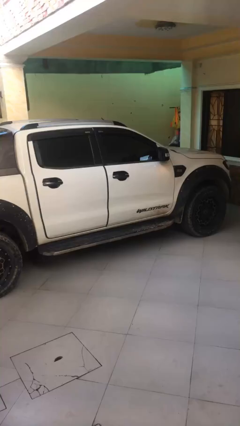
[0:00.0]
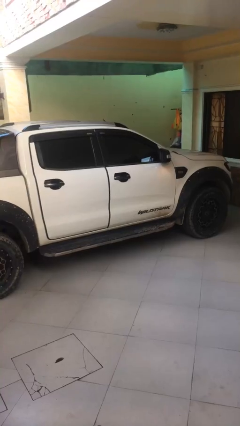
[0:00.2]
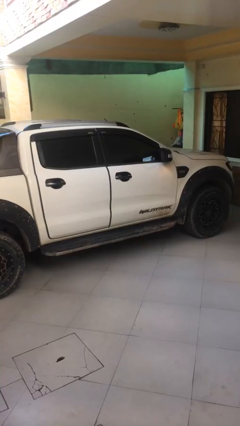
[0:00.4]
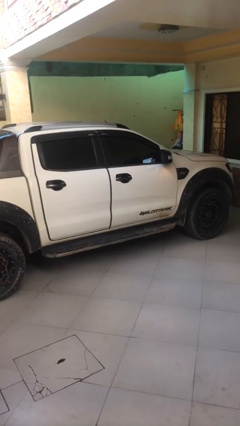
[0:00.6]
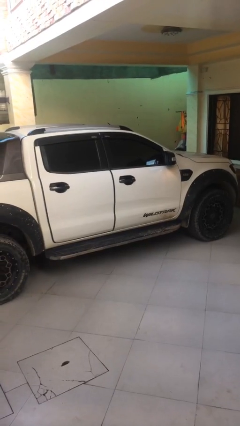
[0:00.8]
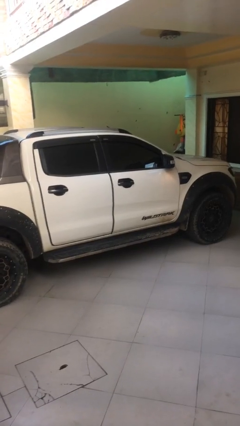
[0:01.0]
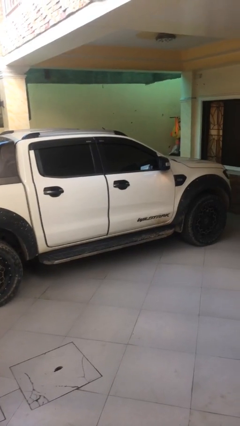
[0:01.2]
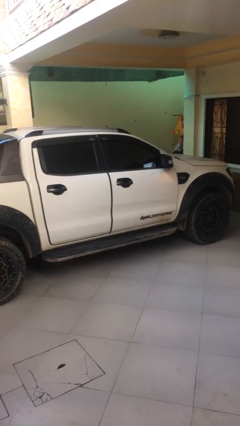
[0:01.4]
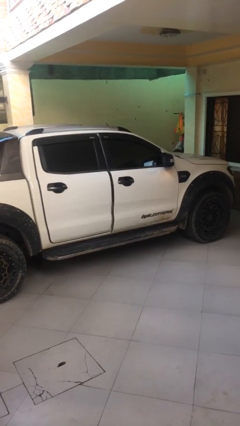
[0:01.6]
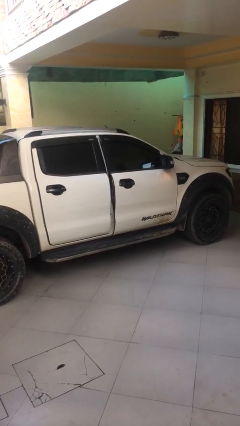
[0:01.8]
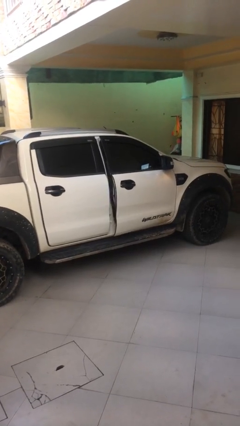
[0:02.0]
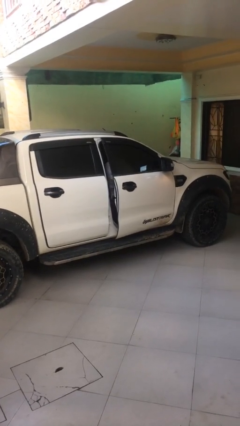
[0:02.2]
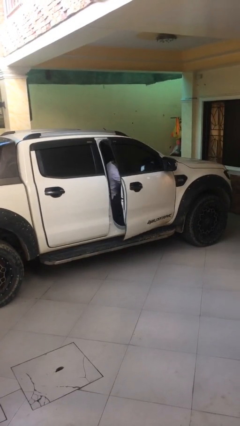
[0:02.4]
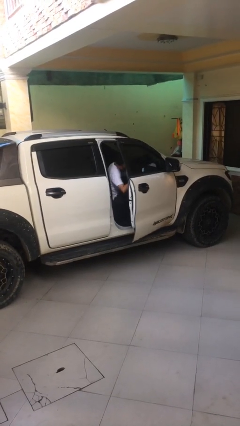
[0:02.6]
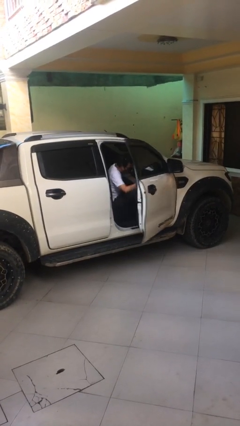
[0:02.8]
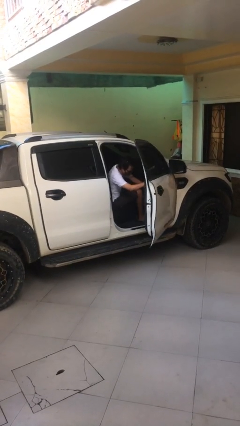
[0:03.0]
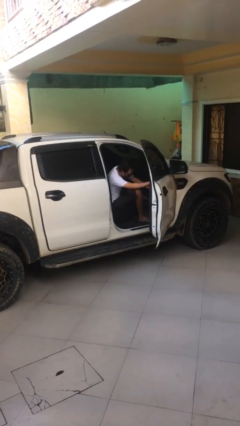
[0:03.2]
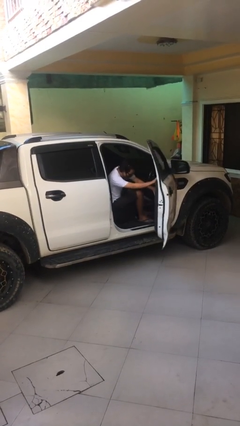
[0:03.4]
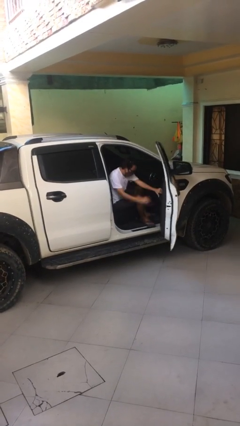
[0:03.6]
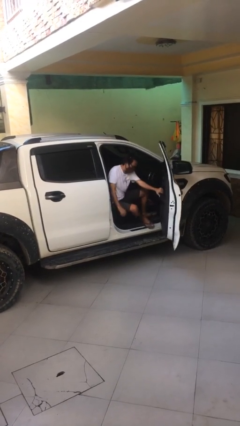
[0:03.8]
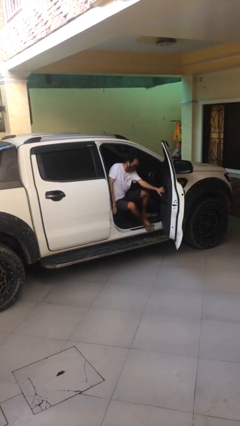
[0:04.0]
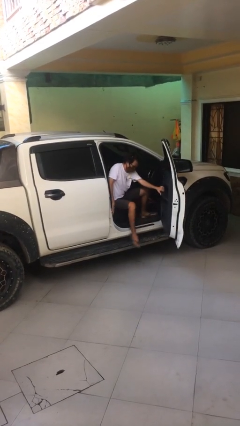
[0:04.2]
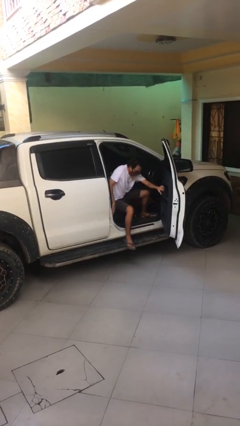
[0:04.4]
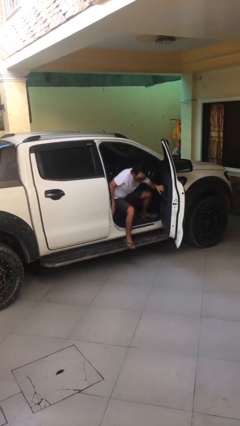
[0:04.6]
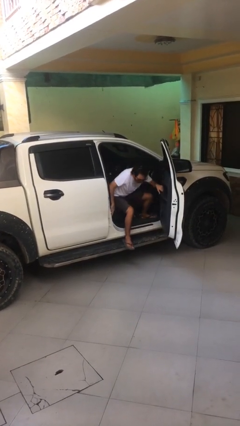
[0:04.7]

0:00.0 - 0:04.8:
person opens car door

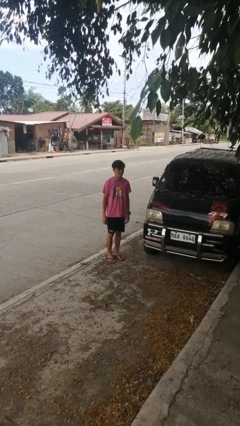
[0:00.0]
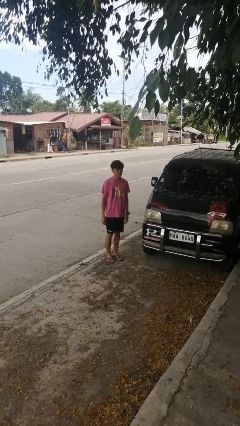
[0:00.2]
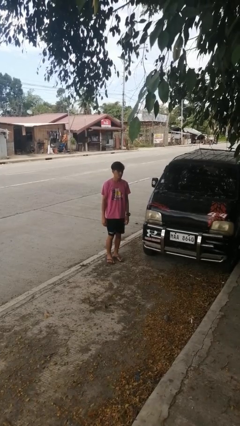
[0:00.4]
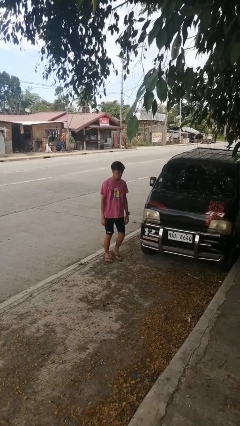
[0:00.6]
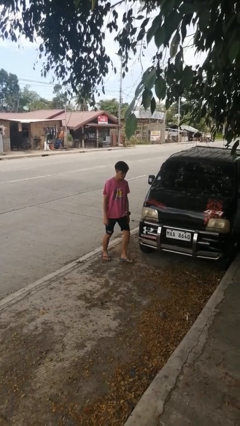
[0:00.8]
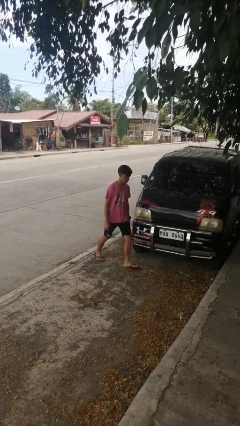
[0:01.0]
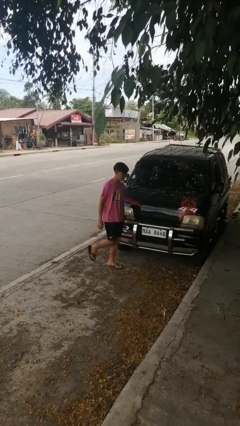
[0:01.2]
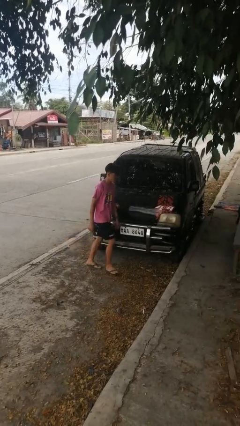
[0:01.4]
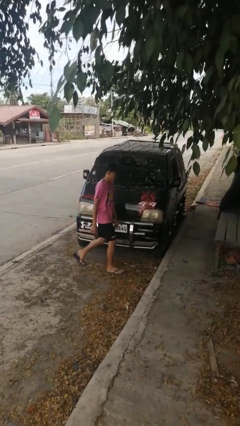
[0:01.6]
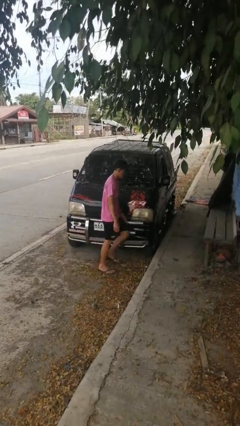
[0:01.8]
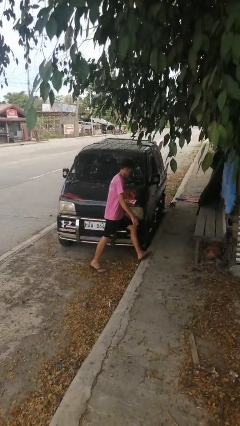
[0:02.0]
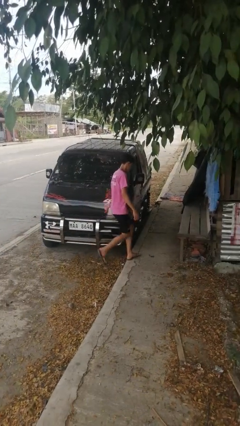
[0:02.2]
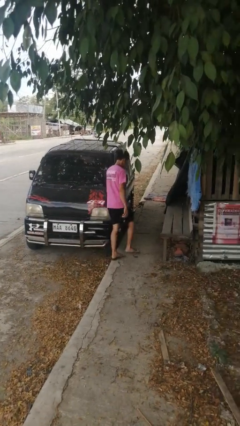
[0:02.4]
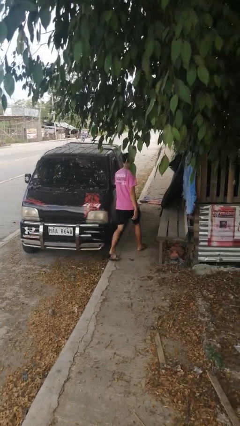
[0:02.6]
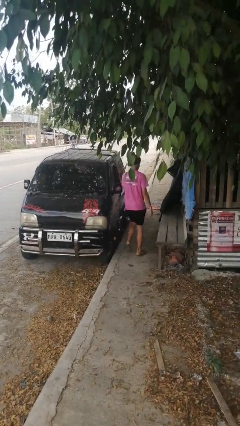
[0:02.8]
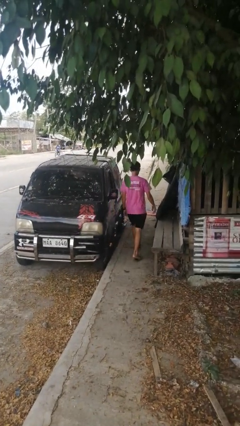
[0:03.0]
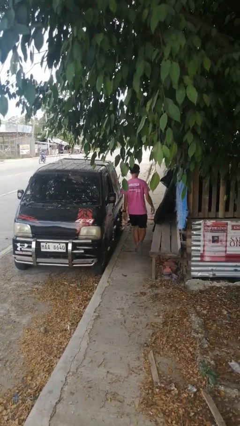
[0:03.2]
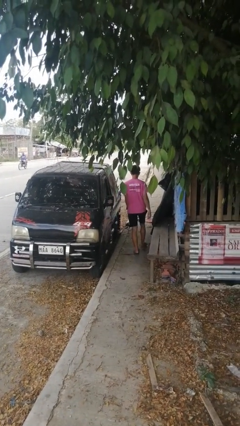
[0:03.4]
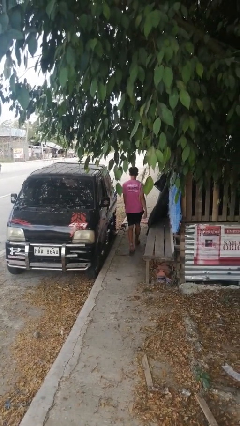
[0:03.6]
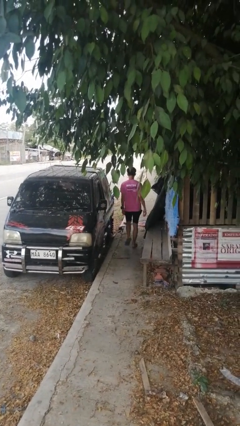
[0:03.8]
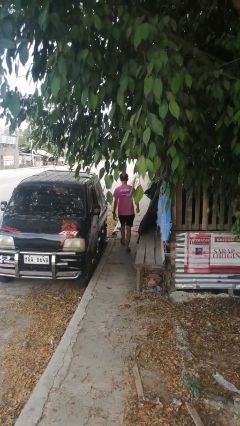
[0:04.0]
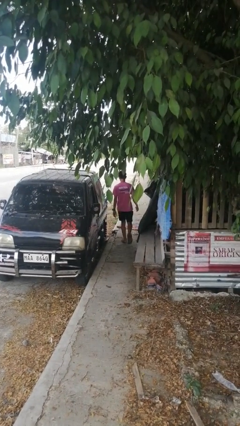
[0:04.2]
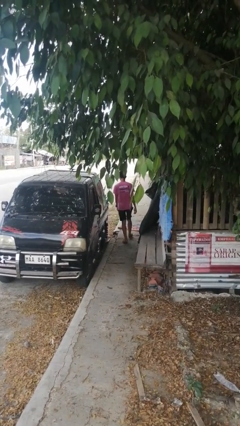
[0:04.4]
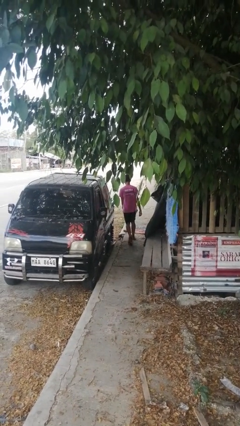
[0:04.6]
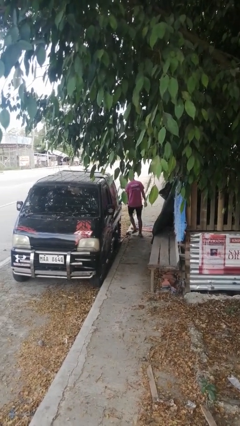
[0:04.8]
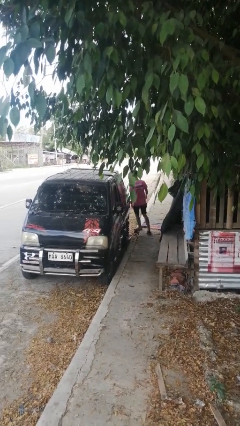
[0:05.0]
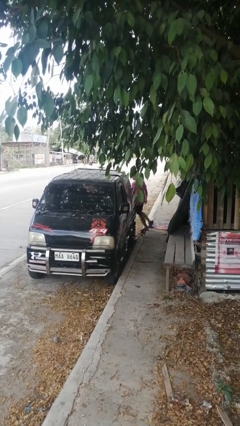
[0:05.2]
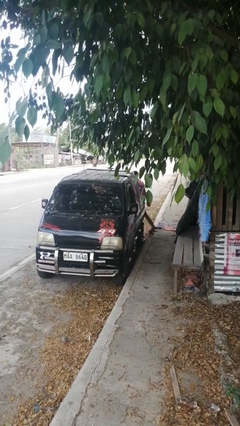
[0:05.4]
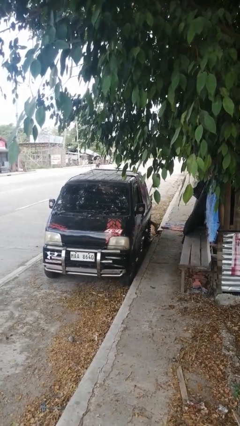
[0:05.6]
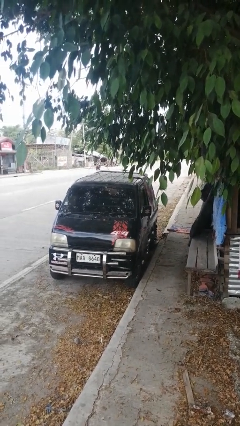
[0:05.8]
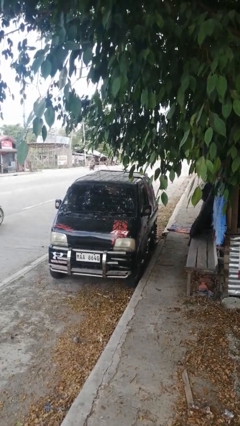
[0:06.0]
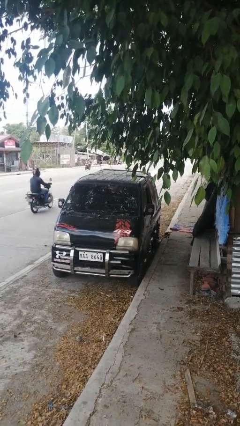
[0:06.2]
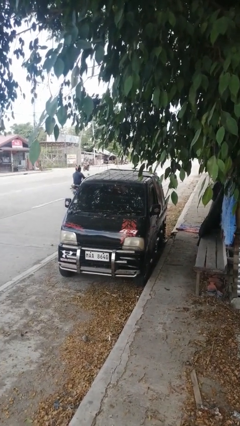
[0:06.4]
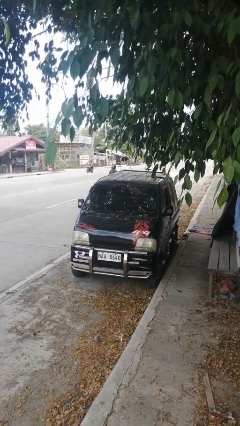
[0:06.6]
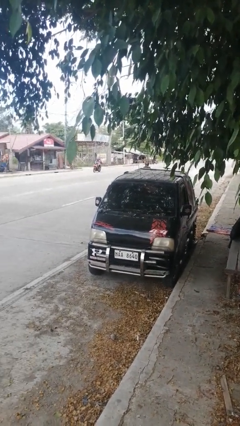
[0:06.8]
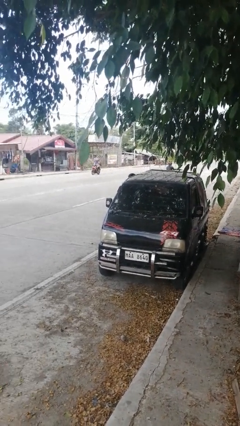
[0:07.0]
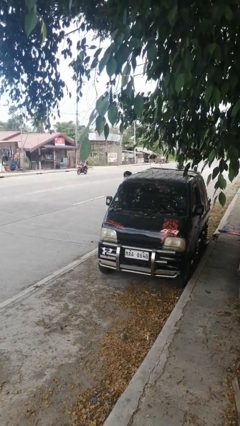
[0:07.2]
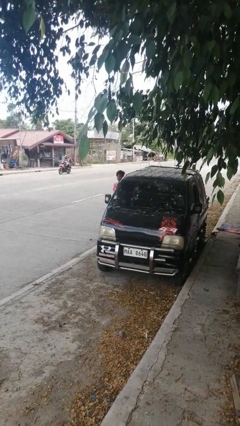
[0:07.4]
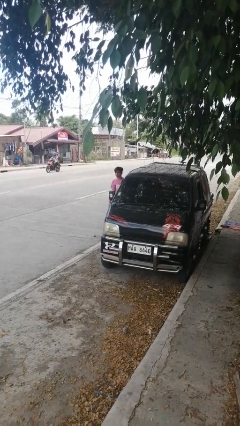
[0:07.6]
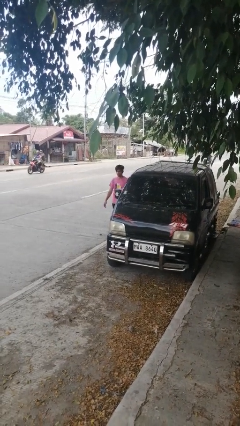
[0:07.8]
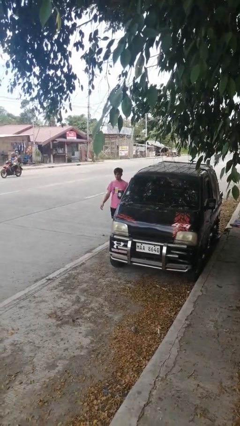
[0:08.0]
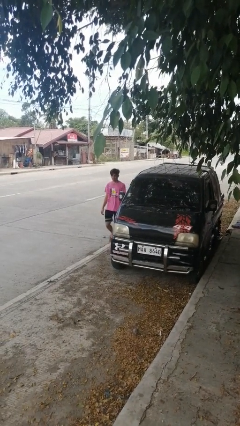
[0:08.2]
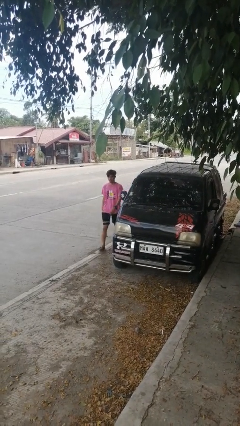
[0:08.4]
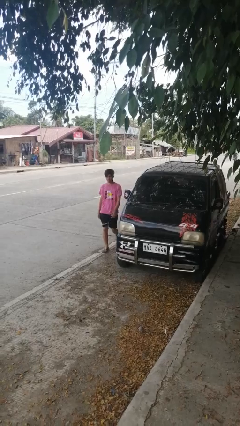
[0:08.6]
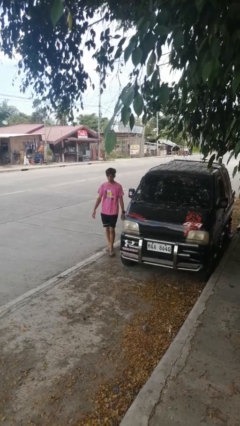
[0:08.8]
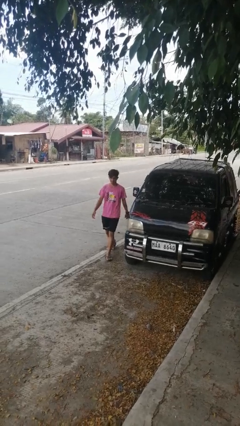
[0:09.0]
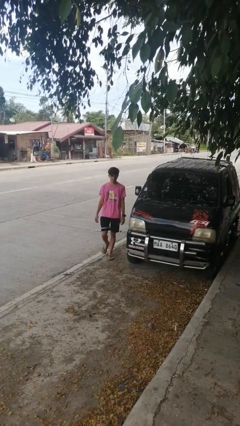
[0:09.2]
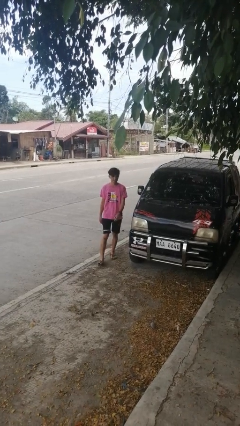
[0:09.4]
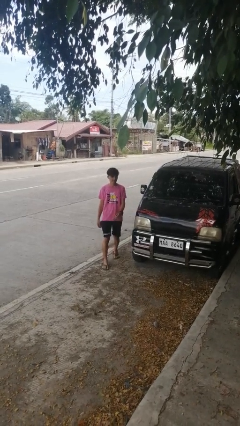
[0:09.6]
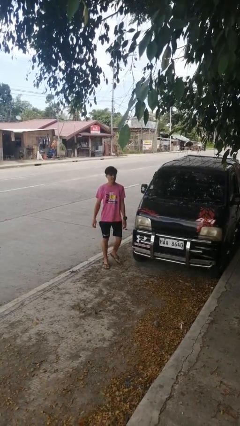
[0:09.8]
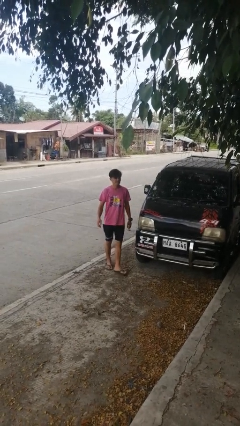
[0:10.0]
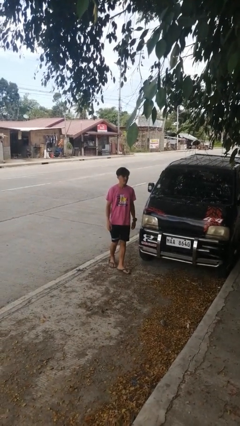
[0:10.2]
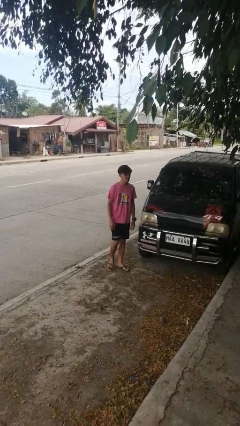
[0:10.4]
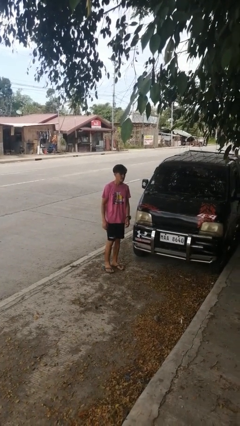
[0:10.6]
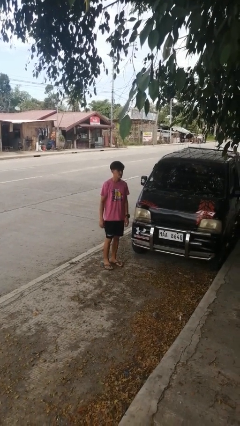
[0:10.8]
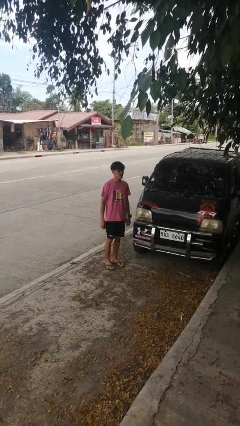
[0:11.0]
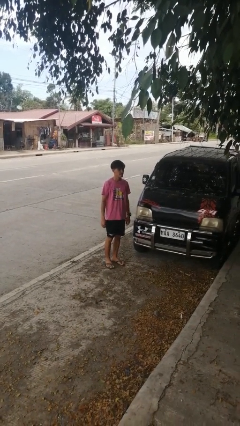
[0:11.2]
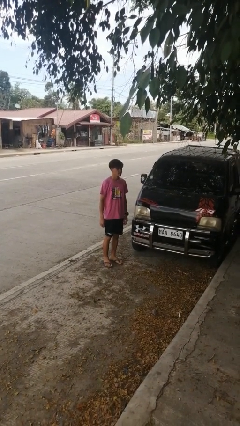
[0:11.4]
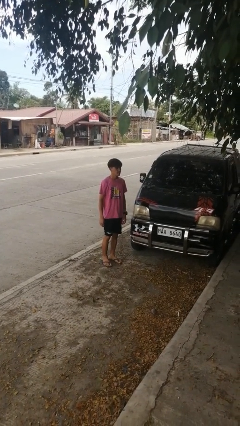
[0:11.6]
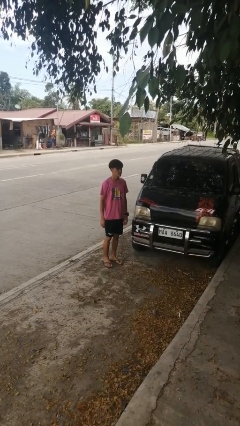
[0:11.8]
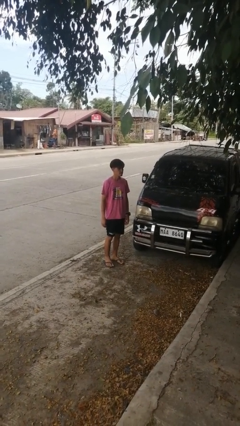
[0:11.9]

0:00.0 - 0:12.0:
person walks around car

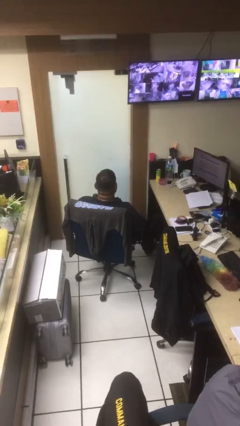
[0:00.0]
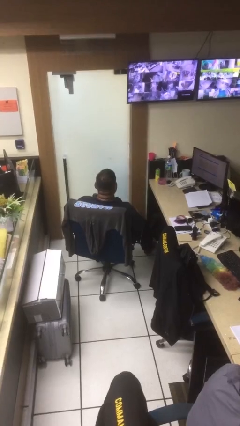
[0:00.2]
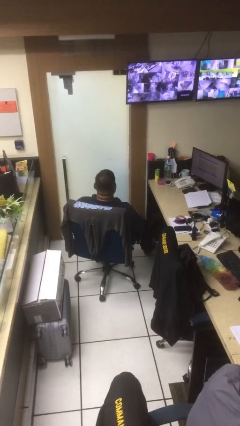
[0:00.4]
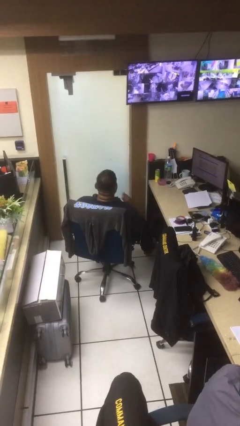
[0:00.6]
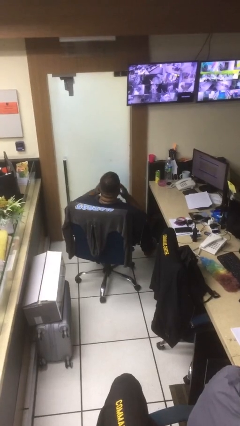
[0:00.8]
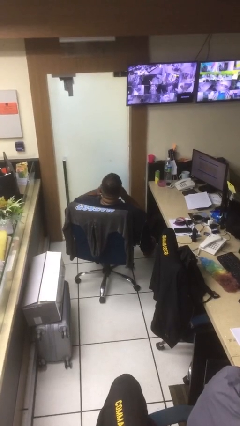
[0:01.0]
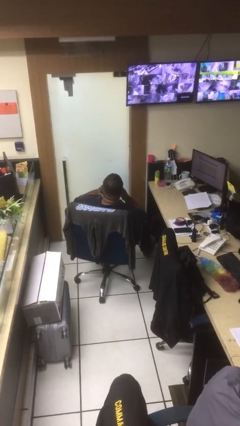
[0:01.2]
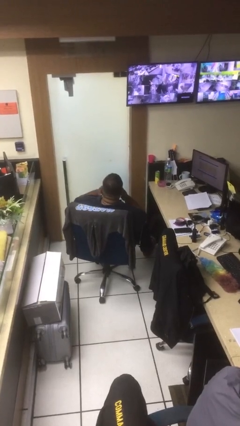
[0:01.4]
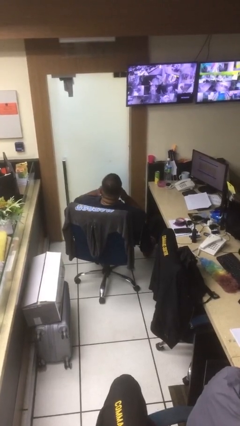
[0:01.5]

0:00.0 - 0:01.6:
person covers face with hands
